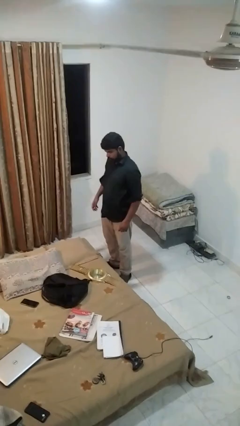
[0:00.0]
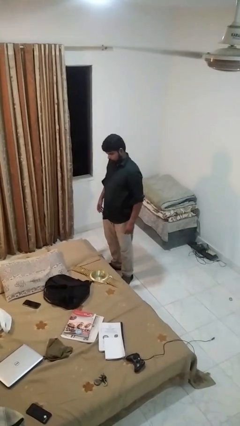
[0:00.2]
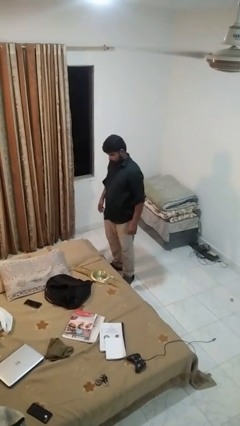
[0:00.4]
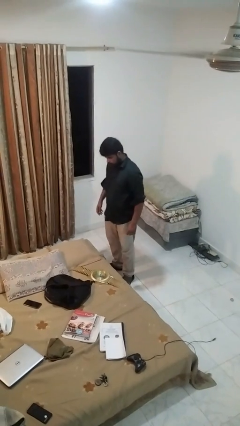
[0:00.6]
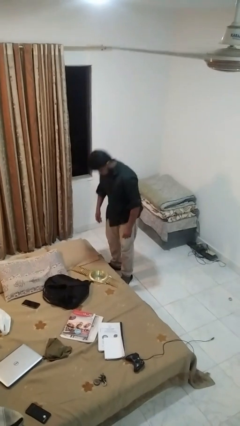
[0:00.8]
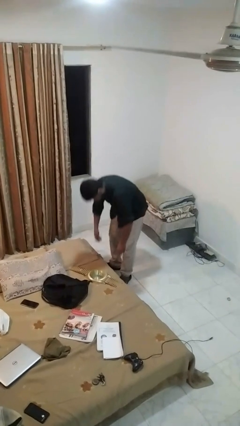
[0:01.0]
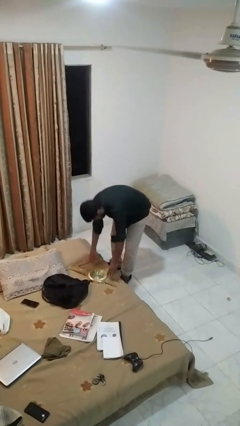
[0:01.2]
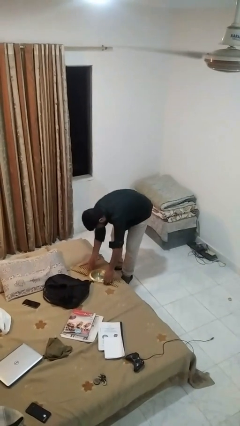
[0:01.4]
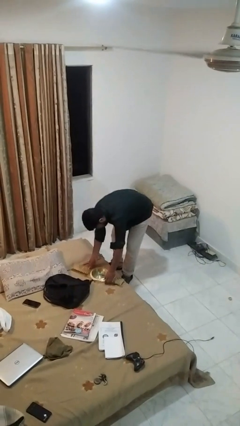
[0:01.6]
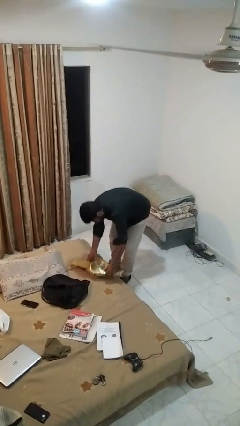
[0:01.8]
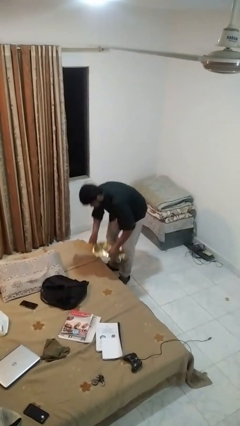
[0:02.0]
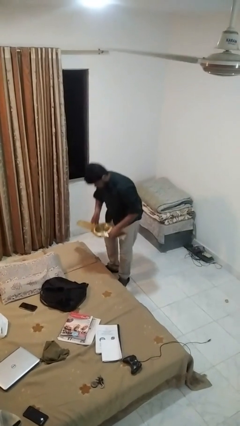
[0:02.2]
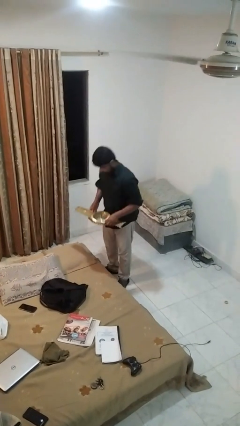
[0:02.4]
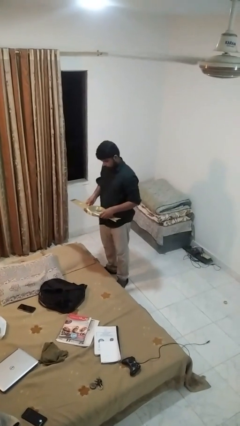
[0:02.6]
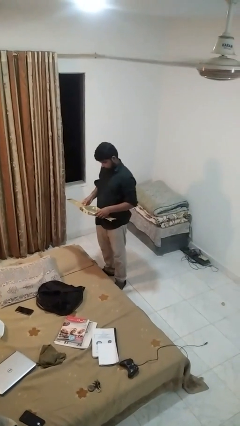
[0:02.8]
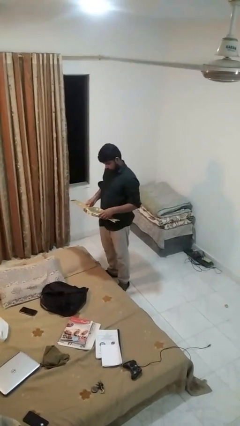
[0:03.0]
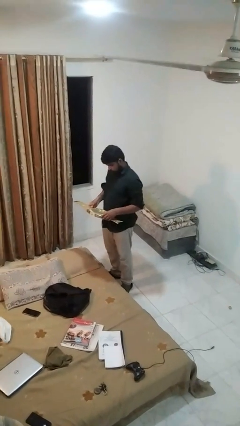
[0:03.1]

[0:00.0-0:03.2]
person picks up object from bed

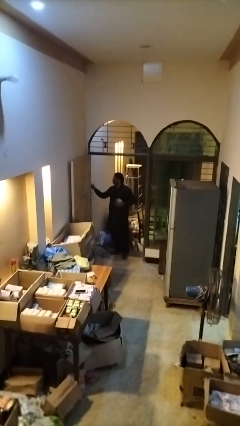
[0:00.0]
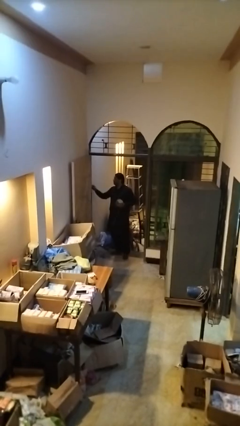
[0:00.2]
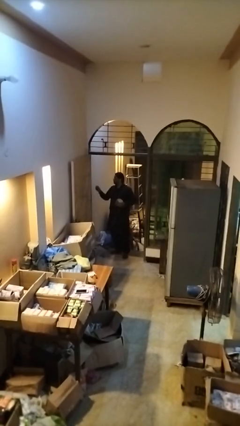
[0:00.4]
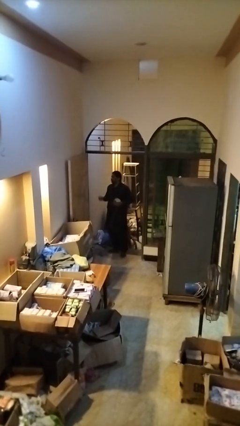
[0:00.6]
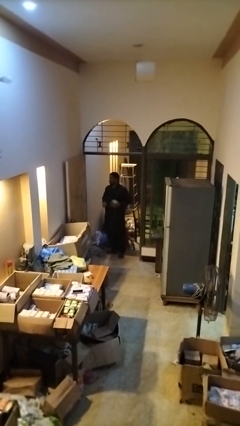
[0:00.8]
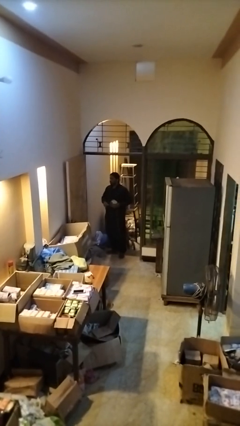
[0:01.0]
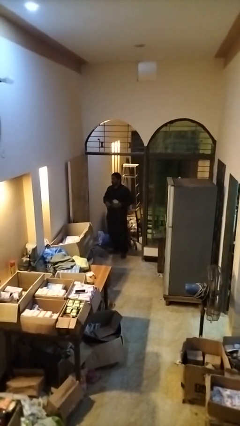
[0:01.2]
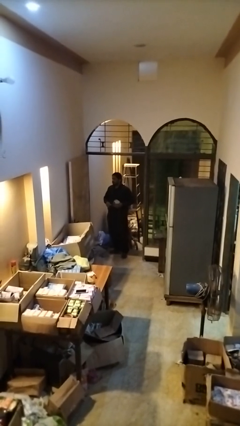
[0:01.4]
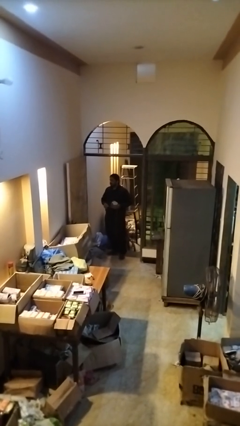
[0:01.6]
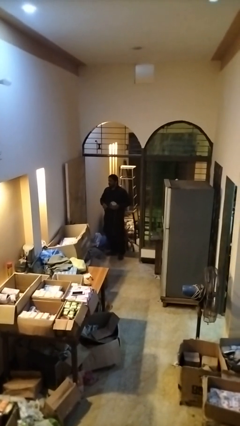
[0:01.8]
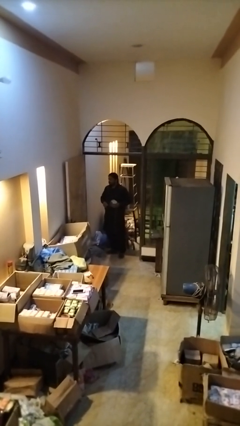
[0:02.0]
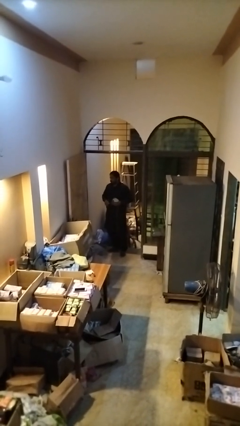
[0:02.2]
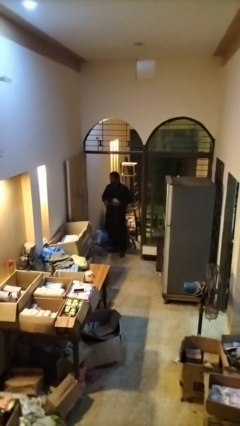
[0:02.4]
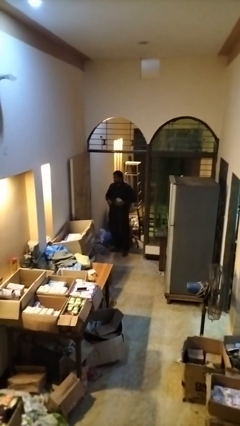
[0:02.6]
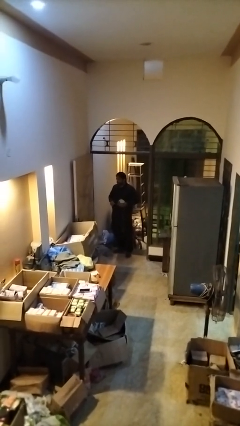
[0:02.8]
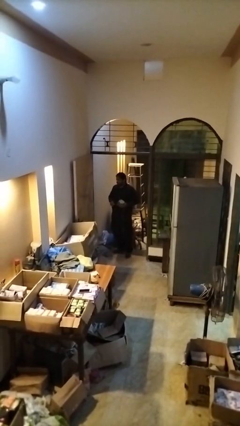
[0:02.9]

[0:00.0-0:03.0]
person unplugs from electrical socket

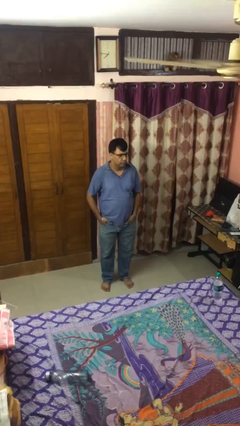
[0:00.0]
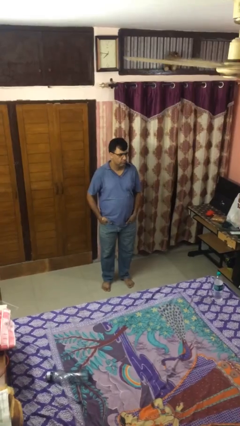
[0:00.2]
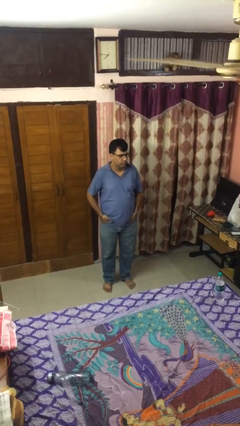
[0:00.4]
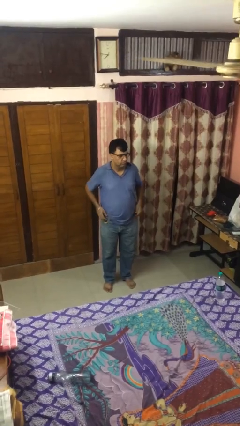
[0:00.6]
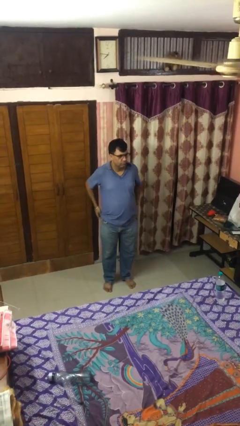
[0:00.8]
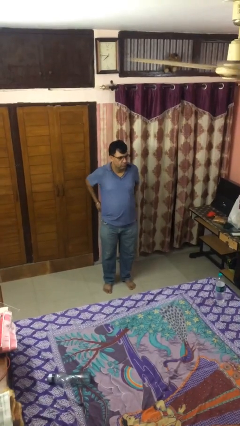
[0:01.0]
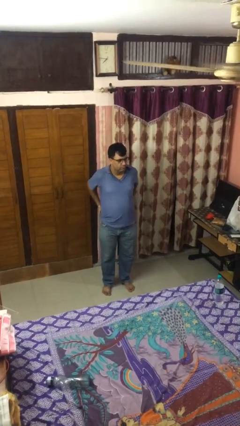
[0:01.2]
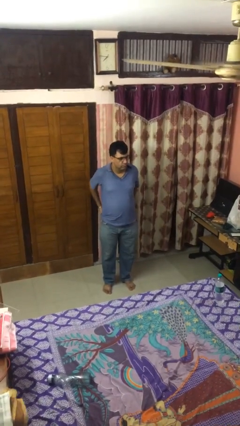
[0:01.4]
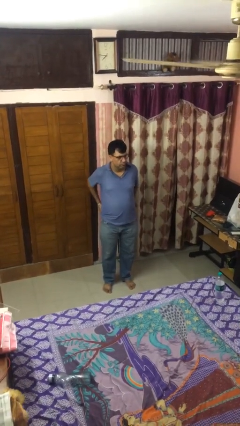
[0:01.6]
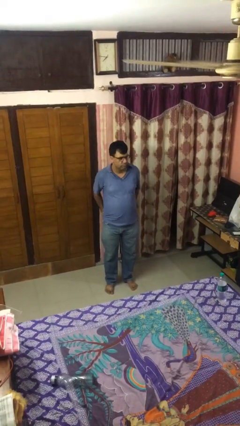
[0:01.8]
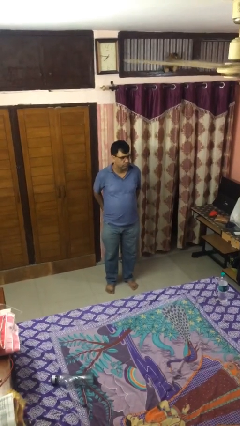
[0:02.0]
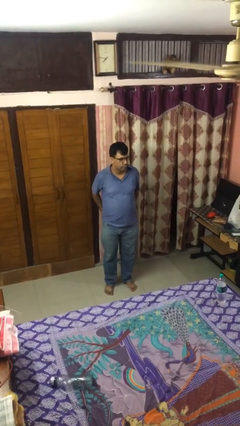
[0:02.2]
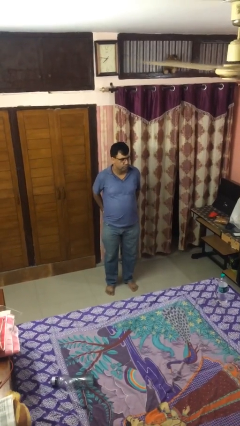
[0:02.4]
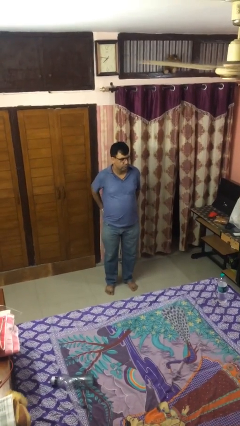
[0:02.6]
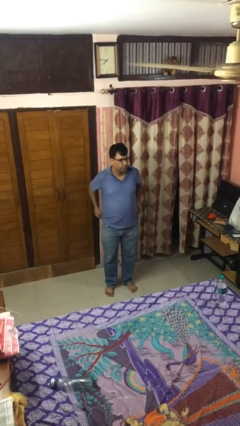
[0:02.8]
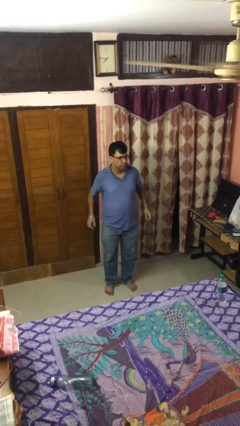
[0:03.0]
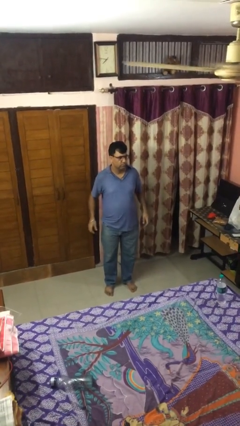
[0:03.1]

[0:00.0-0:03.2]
person puts hands in back pockets

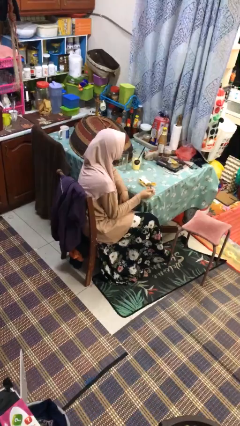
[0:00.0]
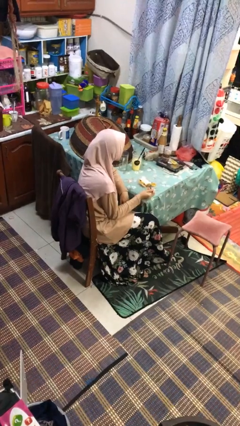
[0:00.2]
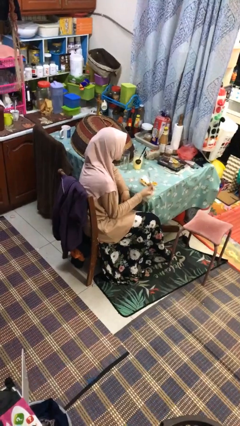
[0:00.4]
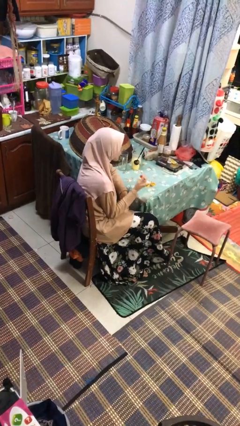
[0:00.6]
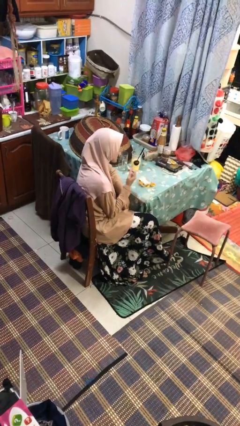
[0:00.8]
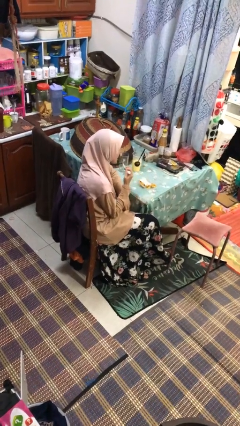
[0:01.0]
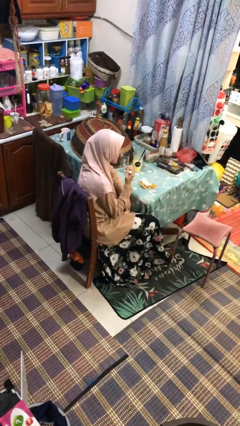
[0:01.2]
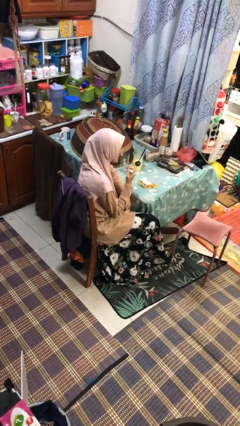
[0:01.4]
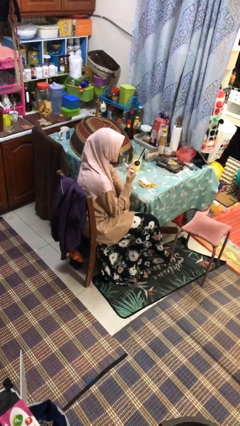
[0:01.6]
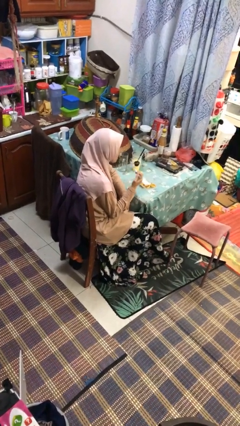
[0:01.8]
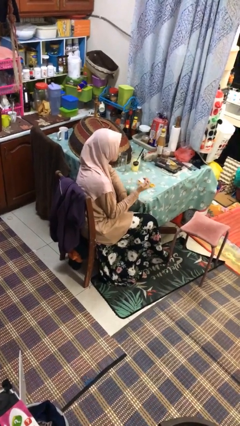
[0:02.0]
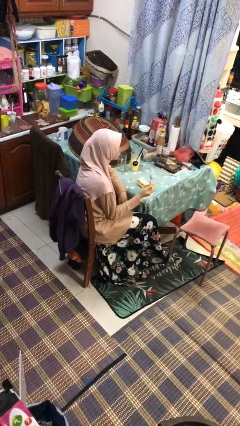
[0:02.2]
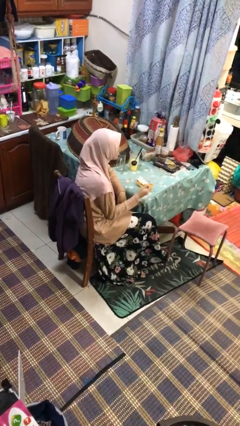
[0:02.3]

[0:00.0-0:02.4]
person eats with utensil

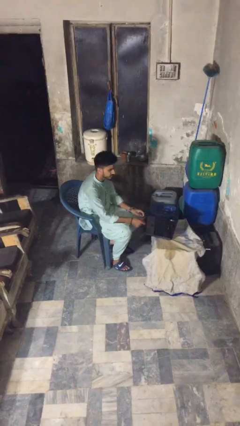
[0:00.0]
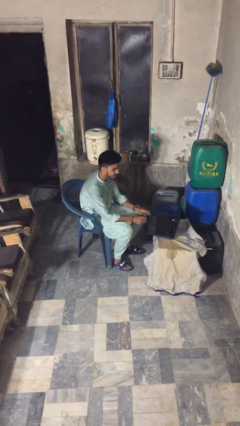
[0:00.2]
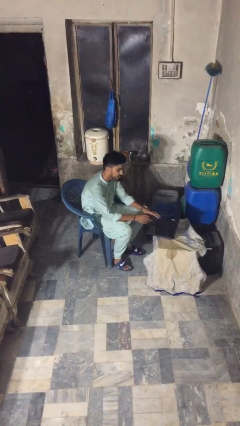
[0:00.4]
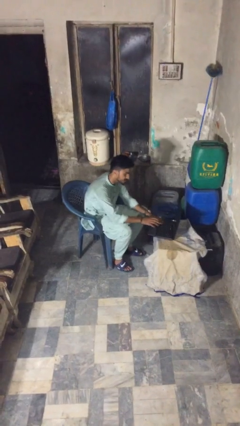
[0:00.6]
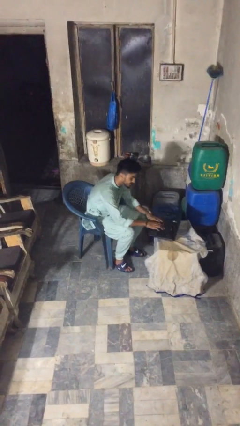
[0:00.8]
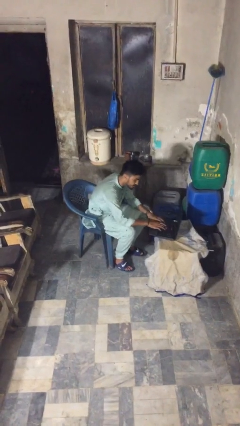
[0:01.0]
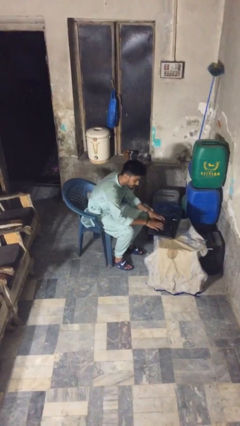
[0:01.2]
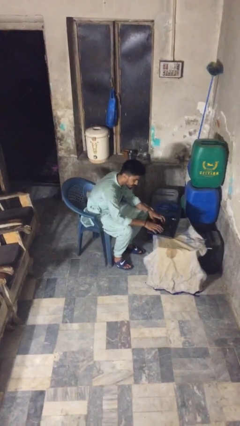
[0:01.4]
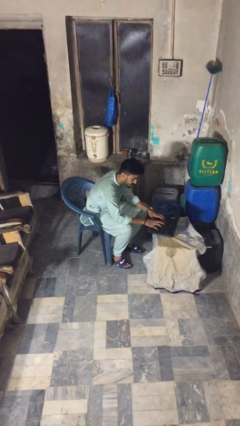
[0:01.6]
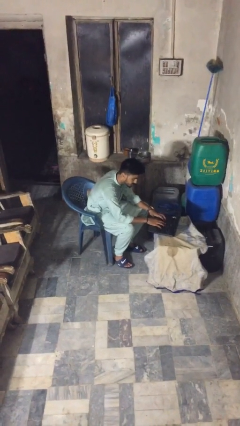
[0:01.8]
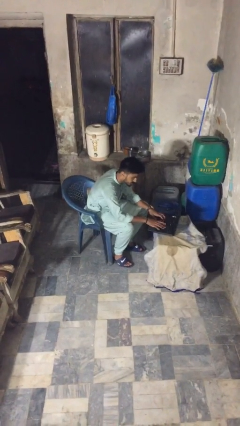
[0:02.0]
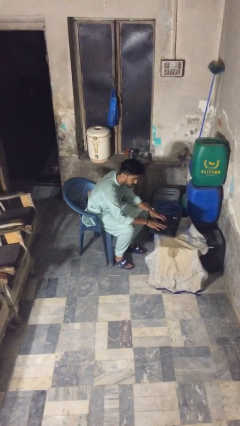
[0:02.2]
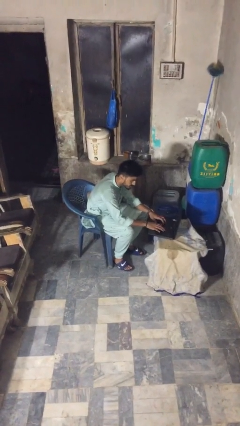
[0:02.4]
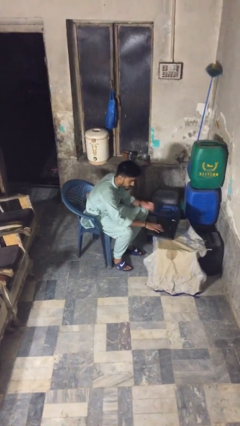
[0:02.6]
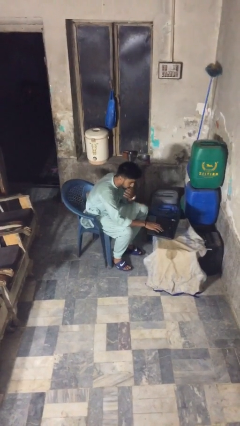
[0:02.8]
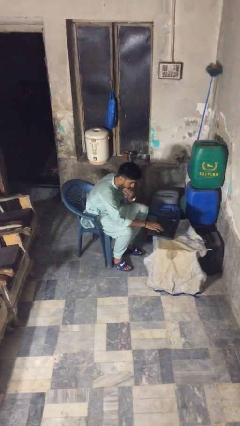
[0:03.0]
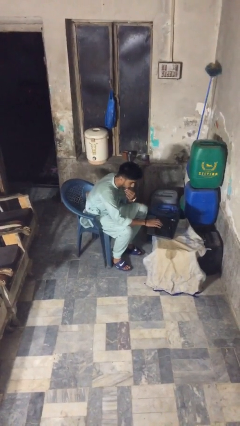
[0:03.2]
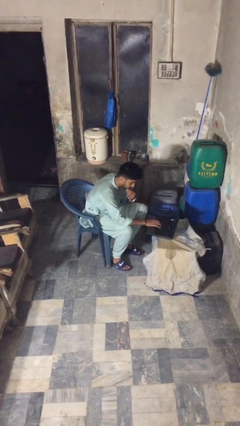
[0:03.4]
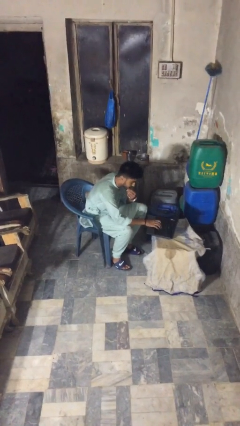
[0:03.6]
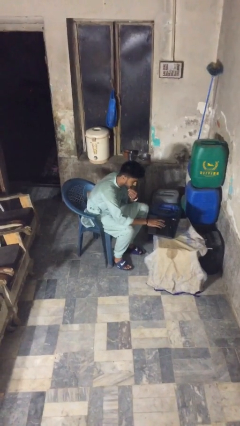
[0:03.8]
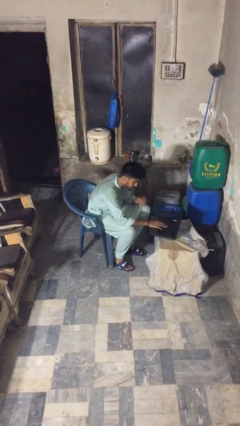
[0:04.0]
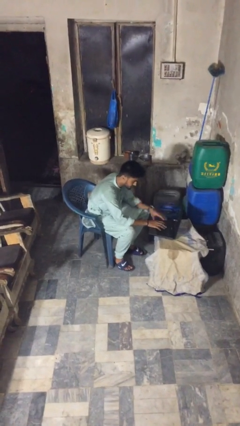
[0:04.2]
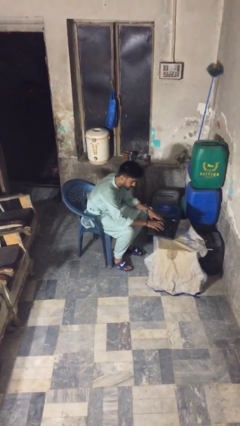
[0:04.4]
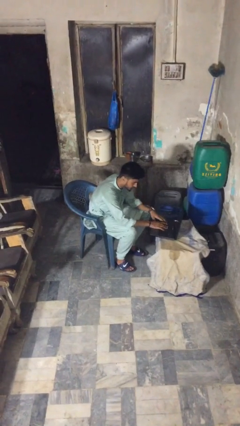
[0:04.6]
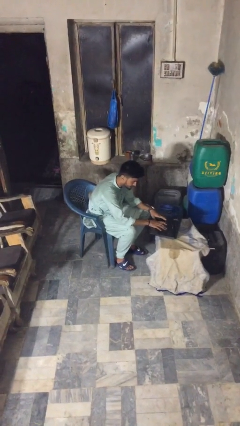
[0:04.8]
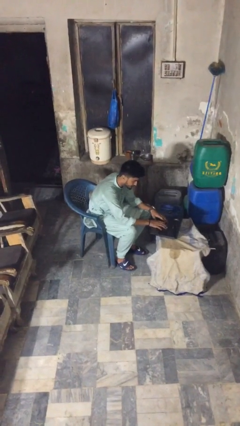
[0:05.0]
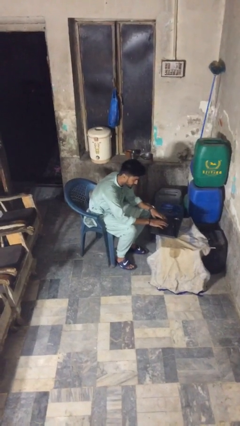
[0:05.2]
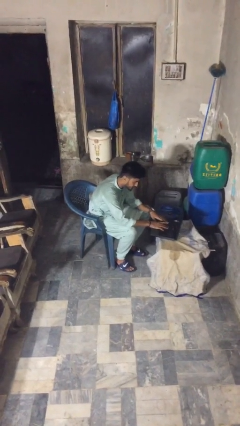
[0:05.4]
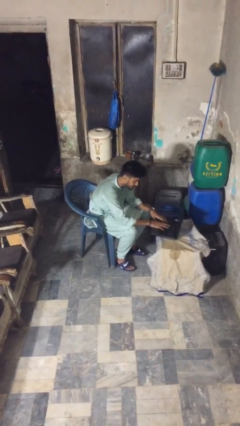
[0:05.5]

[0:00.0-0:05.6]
person interacts with laptop

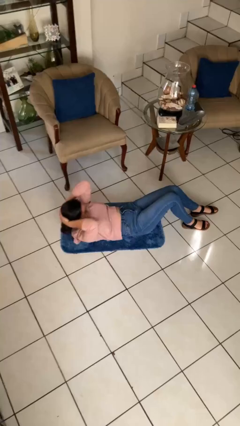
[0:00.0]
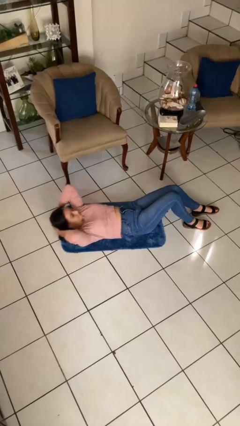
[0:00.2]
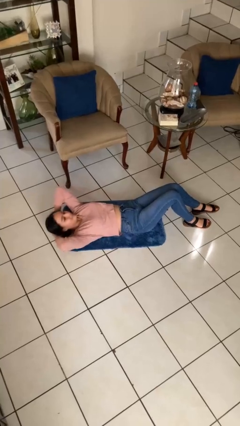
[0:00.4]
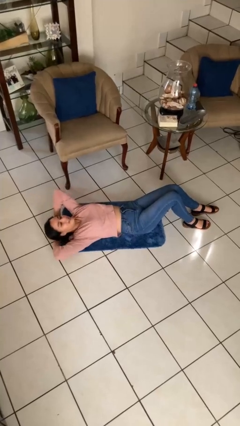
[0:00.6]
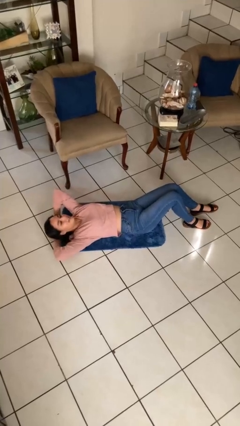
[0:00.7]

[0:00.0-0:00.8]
person exercises with situp
